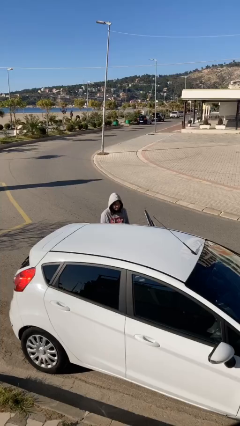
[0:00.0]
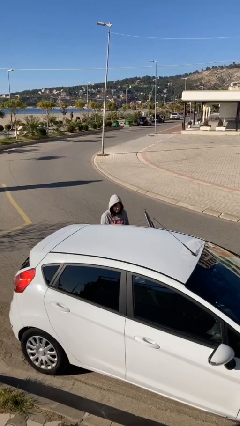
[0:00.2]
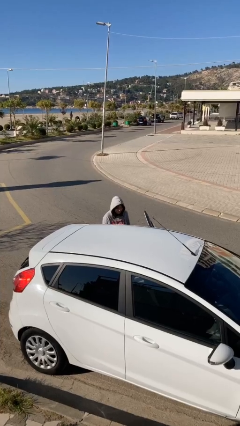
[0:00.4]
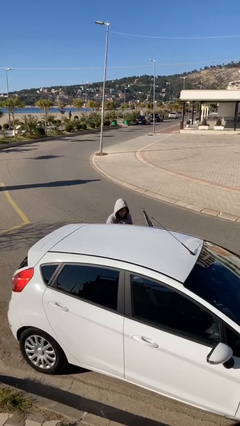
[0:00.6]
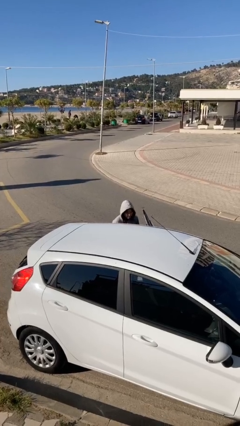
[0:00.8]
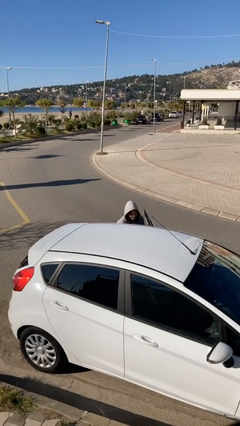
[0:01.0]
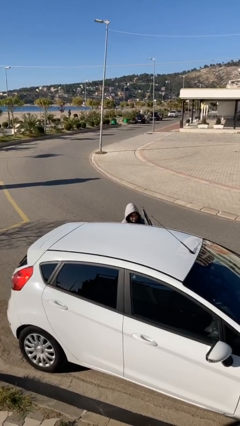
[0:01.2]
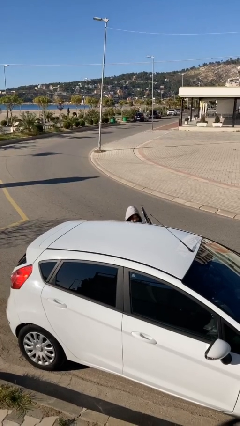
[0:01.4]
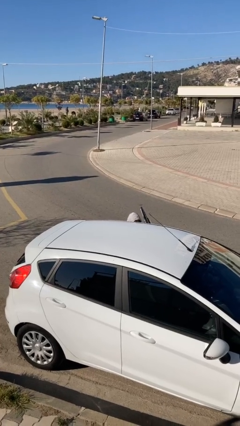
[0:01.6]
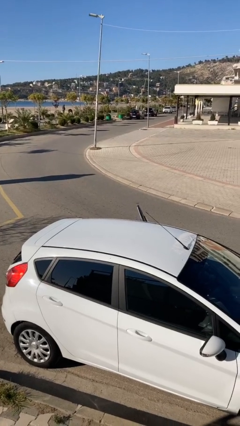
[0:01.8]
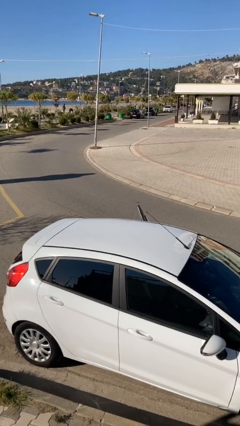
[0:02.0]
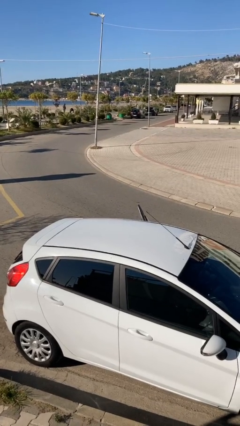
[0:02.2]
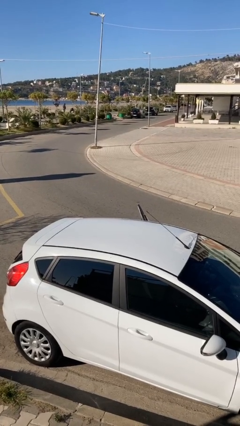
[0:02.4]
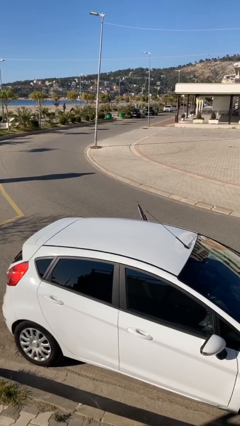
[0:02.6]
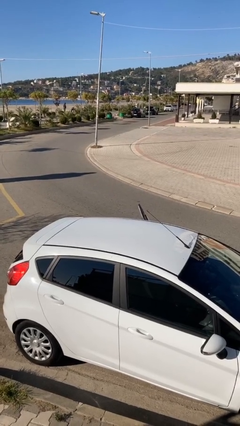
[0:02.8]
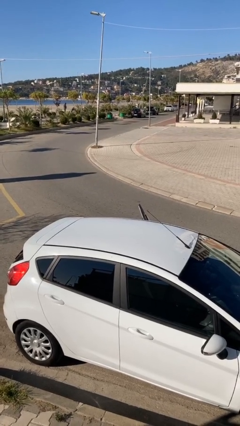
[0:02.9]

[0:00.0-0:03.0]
person enters car

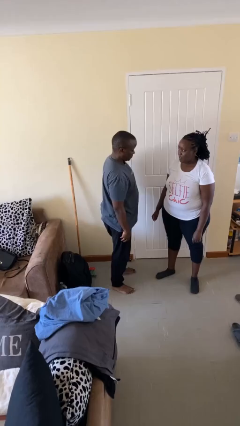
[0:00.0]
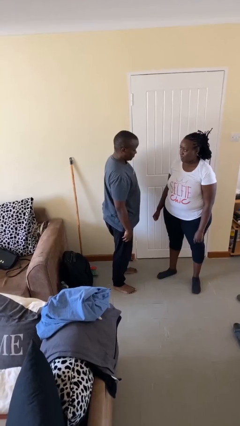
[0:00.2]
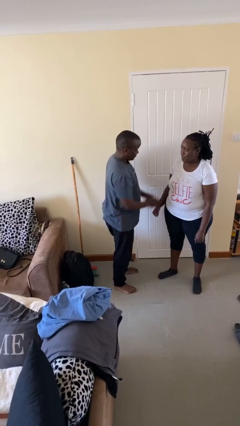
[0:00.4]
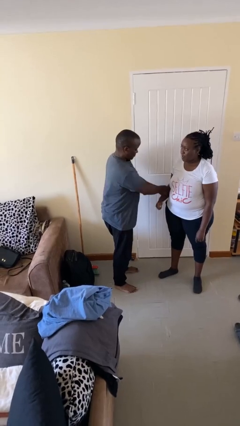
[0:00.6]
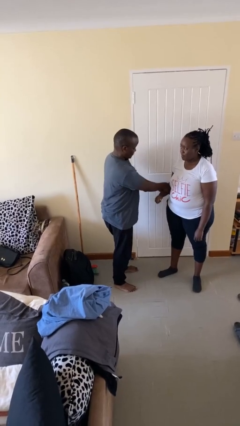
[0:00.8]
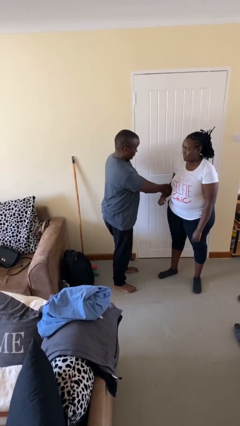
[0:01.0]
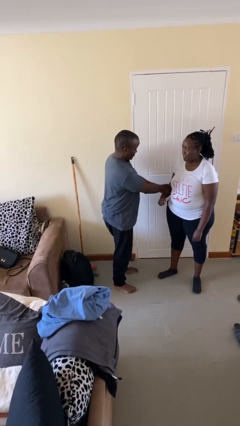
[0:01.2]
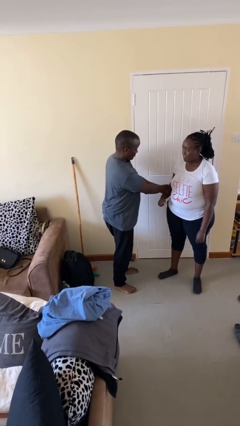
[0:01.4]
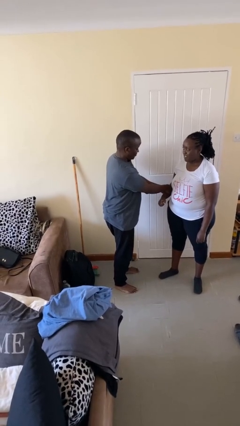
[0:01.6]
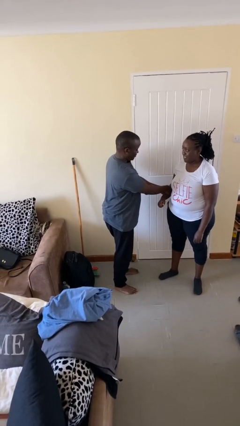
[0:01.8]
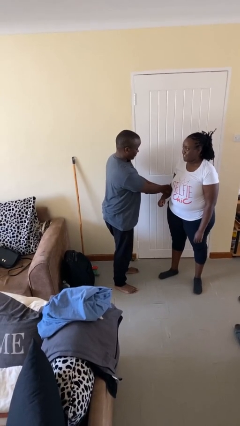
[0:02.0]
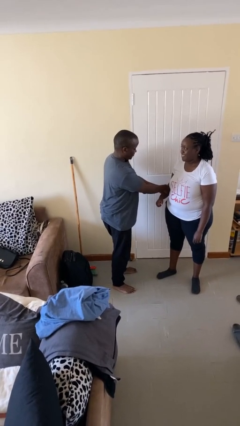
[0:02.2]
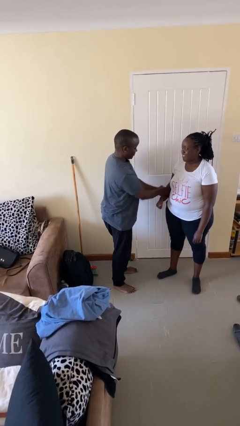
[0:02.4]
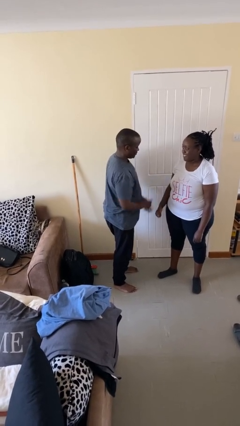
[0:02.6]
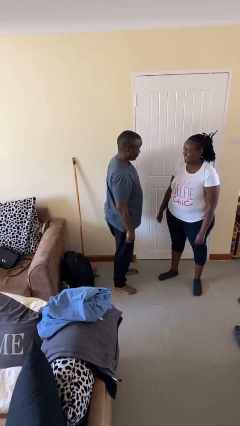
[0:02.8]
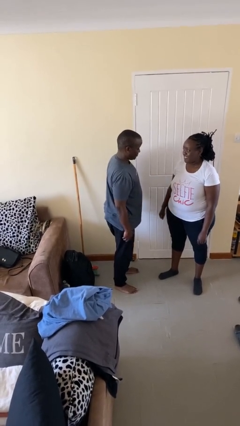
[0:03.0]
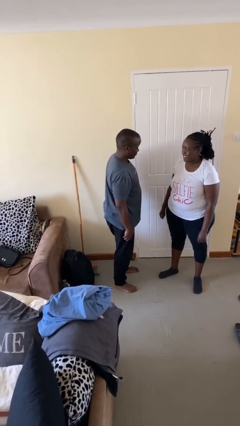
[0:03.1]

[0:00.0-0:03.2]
person grabs person by forearm

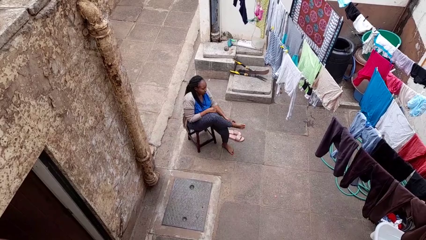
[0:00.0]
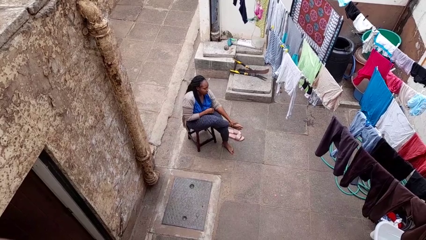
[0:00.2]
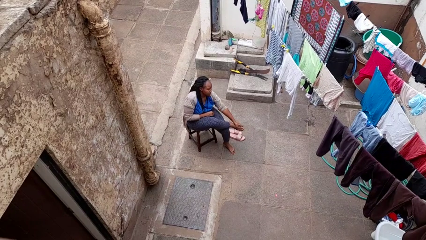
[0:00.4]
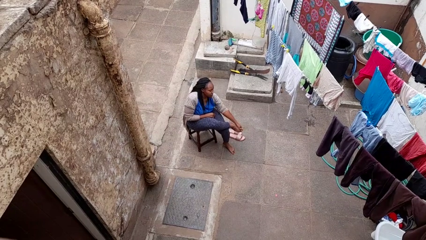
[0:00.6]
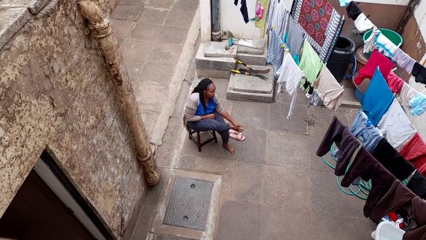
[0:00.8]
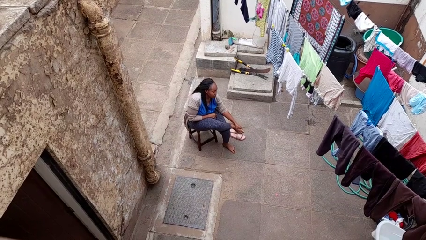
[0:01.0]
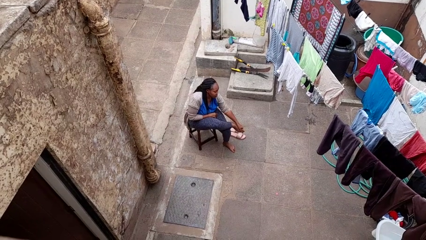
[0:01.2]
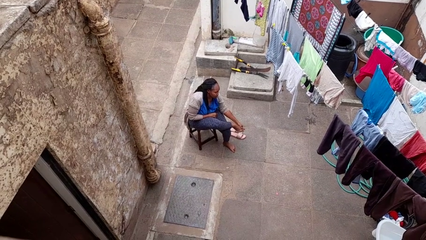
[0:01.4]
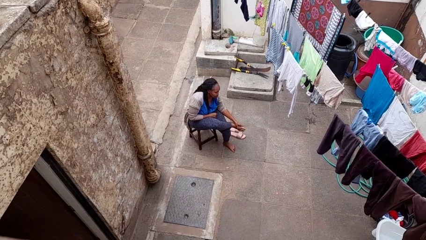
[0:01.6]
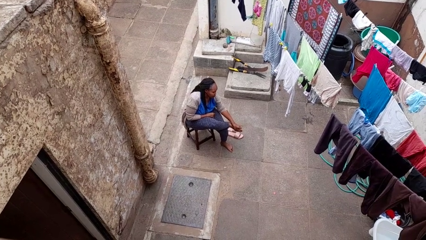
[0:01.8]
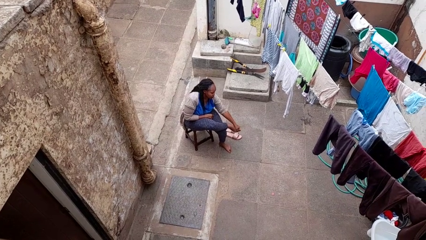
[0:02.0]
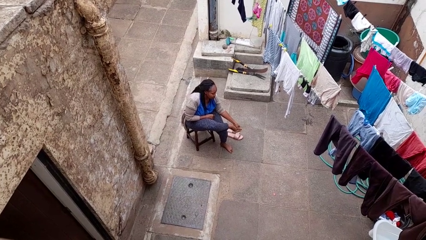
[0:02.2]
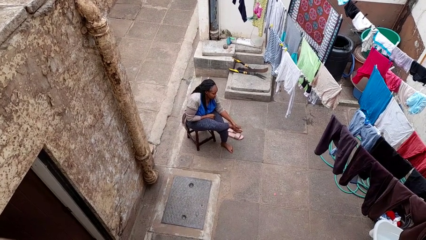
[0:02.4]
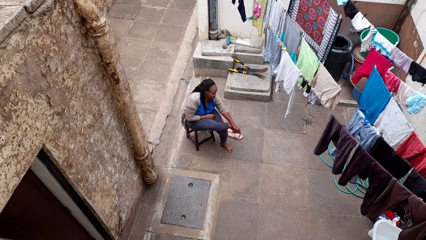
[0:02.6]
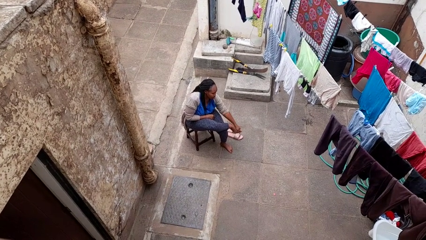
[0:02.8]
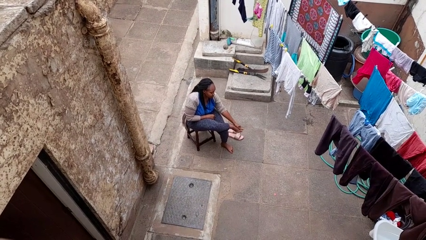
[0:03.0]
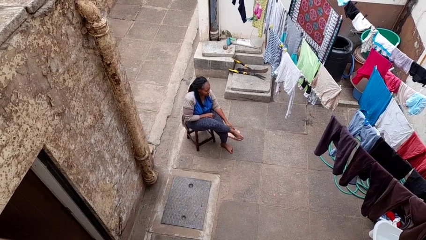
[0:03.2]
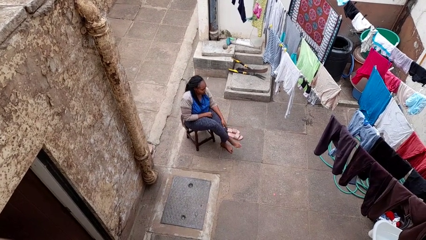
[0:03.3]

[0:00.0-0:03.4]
person rubs foot

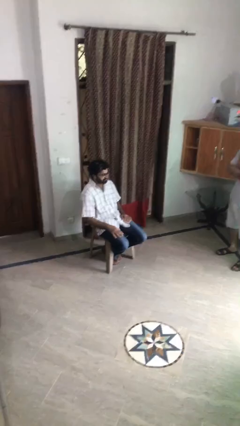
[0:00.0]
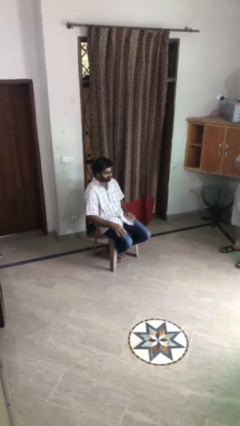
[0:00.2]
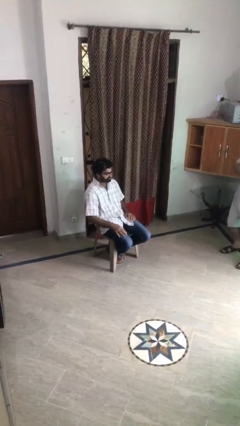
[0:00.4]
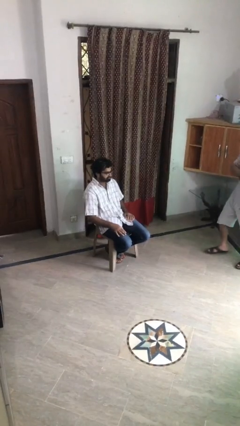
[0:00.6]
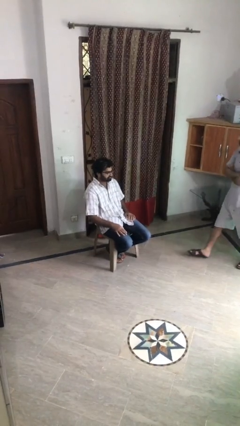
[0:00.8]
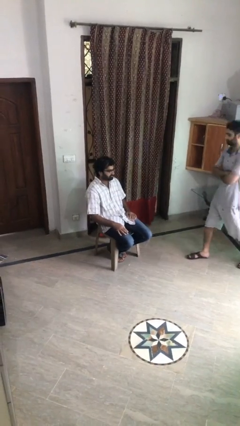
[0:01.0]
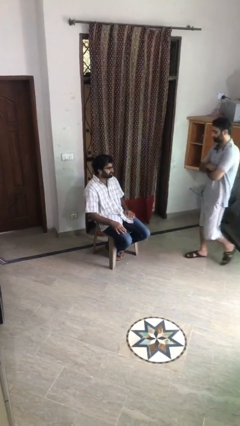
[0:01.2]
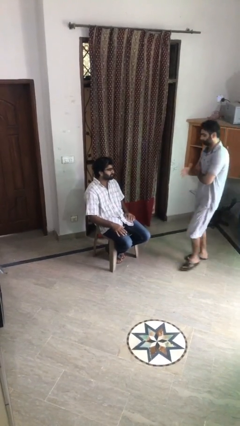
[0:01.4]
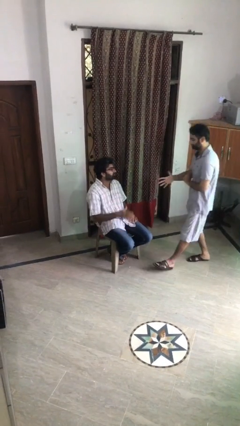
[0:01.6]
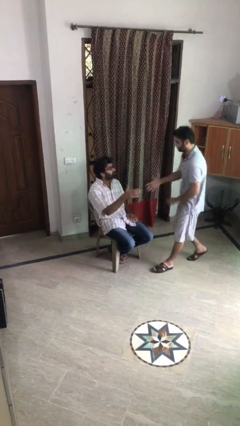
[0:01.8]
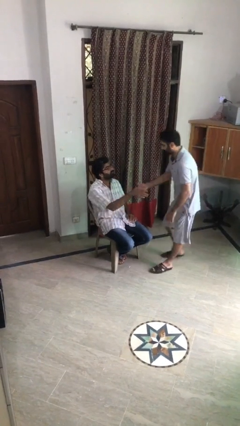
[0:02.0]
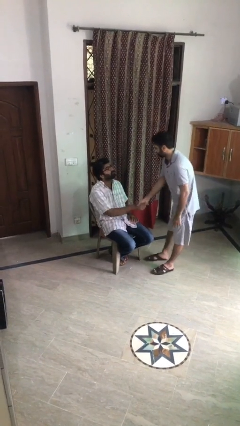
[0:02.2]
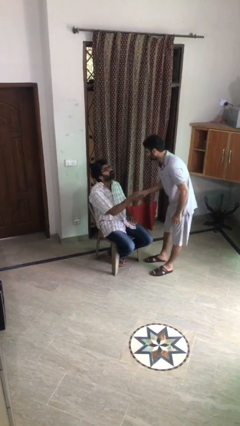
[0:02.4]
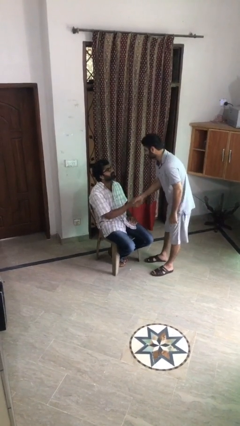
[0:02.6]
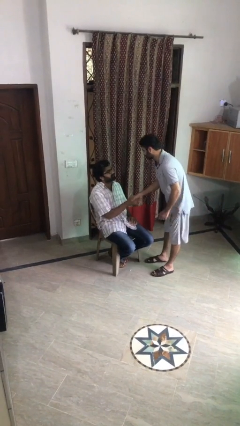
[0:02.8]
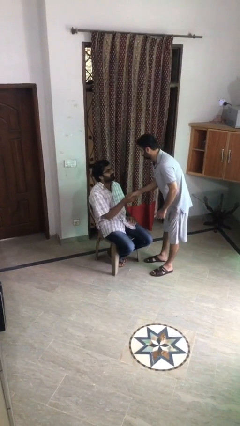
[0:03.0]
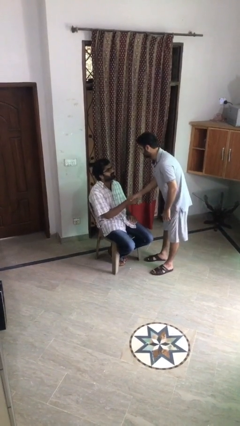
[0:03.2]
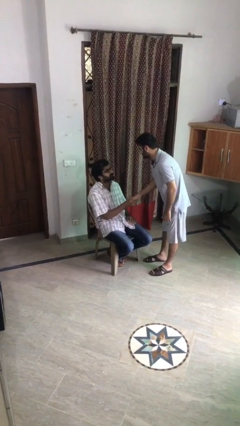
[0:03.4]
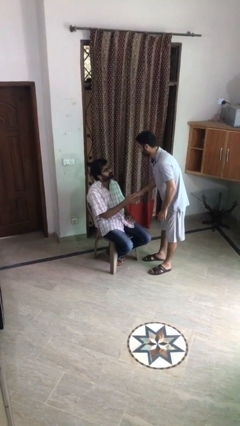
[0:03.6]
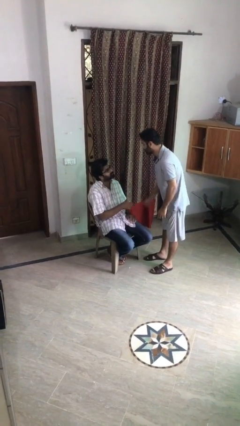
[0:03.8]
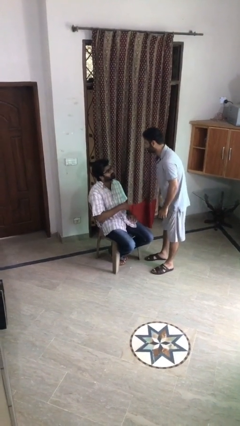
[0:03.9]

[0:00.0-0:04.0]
person shakes hand

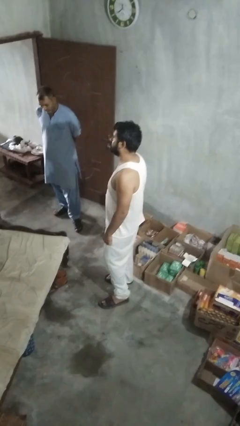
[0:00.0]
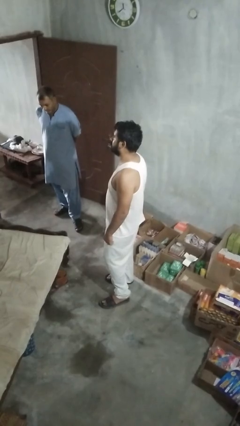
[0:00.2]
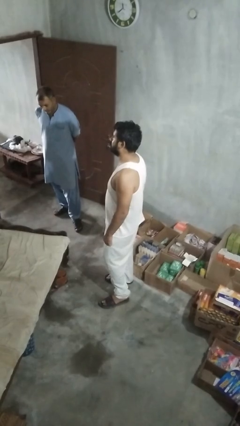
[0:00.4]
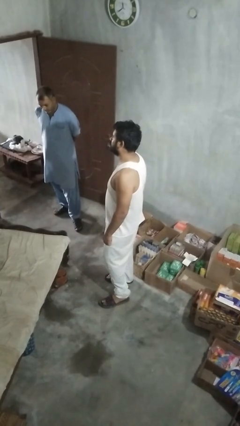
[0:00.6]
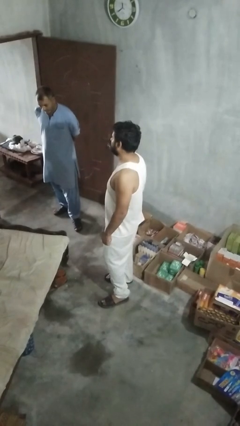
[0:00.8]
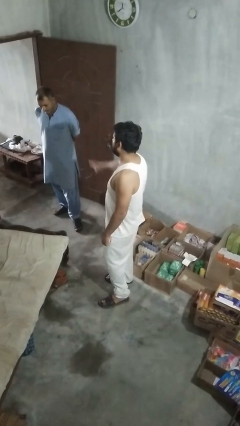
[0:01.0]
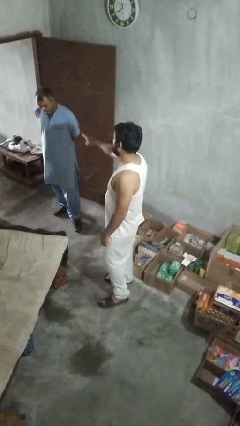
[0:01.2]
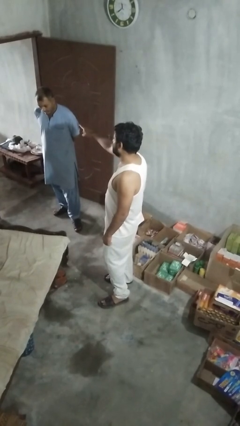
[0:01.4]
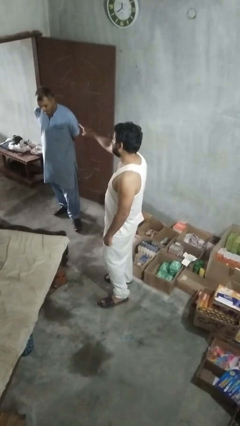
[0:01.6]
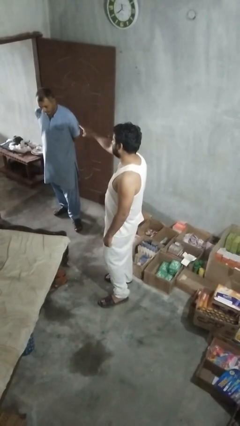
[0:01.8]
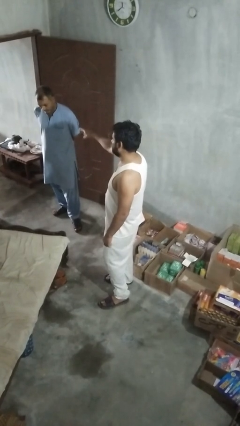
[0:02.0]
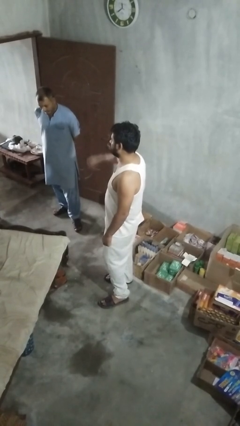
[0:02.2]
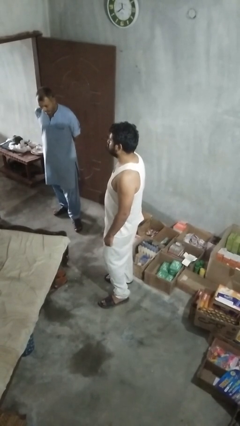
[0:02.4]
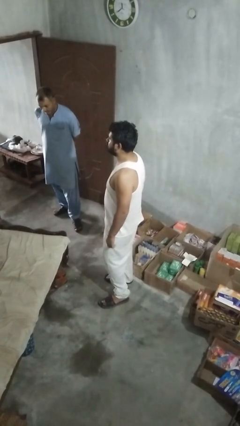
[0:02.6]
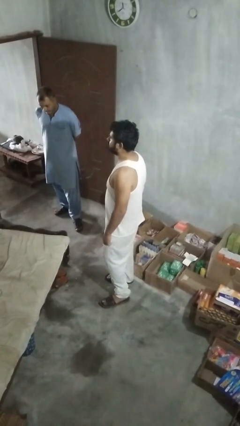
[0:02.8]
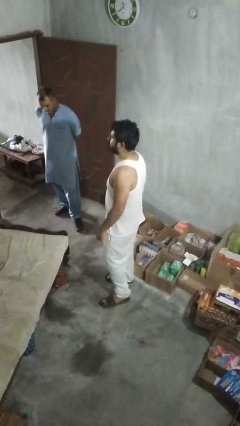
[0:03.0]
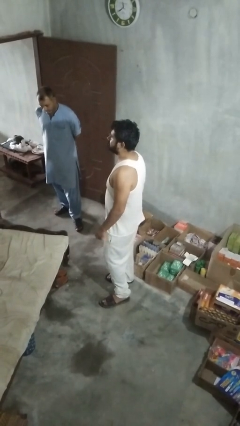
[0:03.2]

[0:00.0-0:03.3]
person points at person

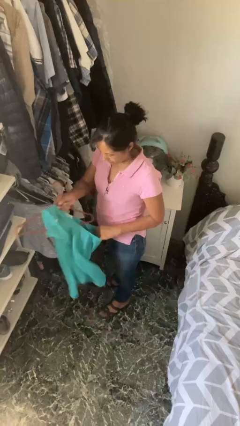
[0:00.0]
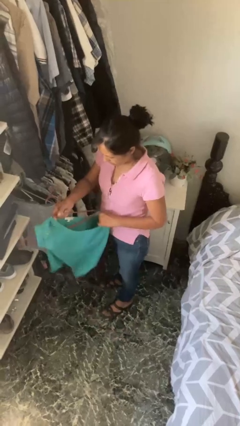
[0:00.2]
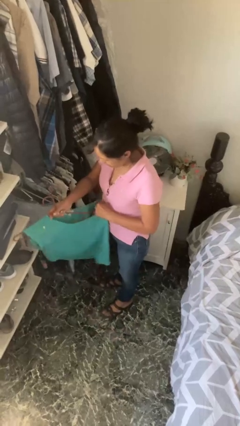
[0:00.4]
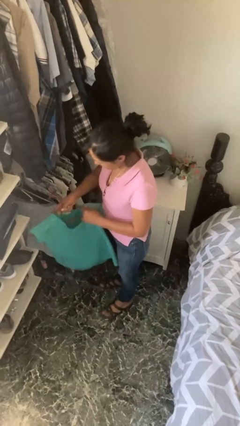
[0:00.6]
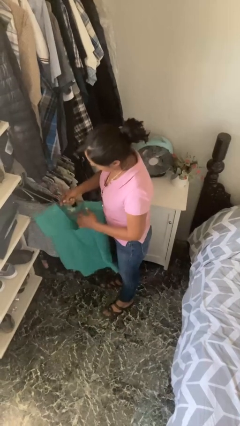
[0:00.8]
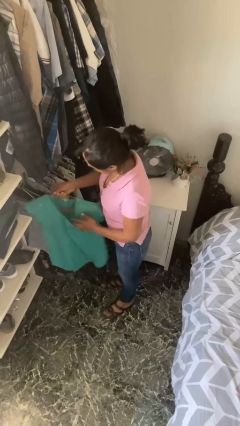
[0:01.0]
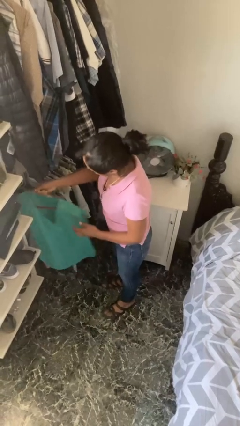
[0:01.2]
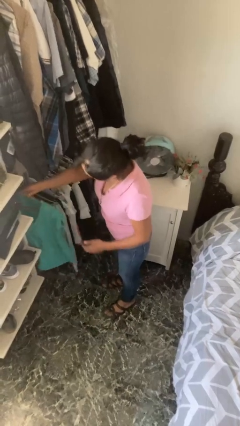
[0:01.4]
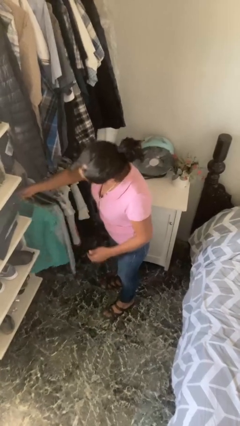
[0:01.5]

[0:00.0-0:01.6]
person puts clothes into closet
